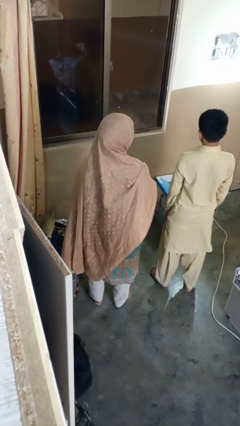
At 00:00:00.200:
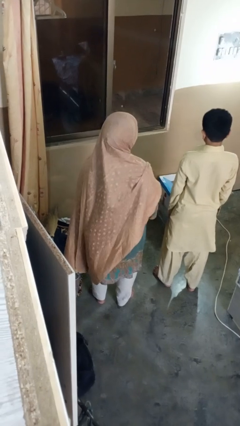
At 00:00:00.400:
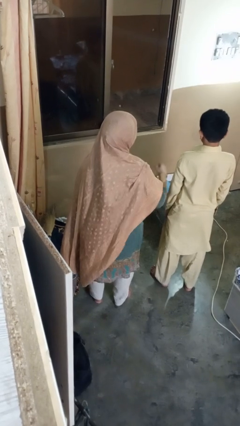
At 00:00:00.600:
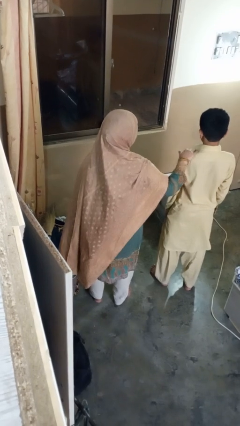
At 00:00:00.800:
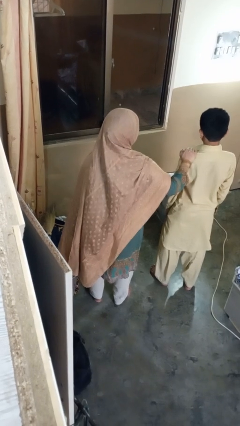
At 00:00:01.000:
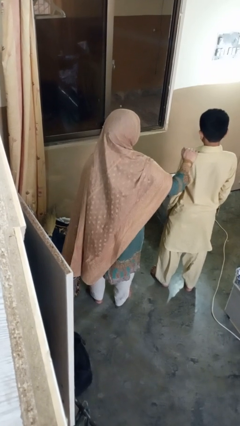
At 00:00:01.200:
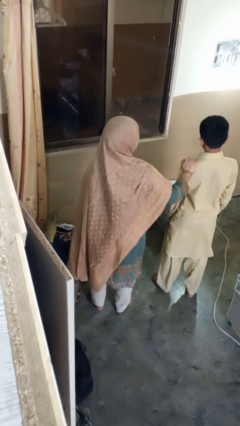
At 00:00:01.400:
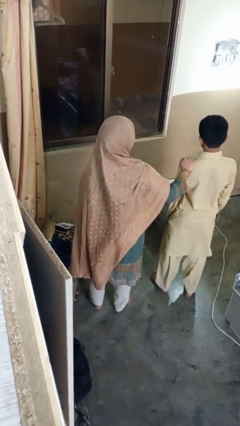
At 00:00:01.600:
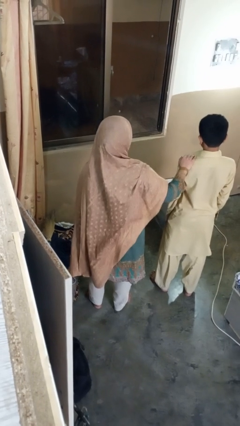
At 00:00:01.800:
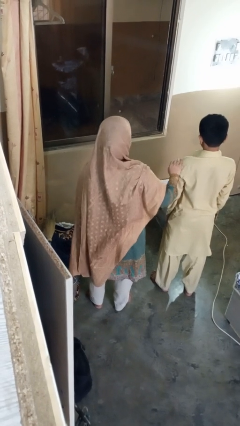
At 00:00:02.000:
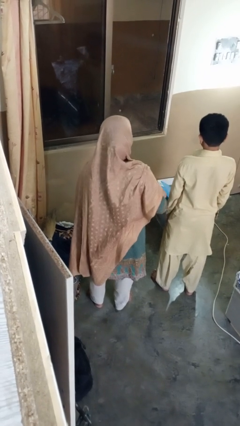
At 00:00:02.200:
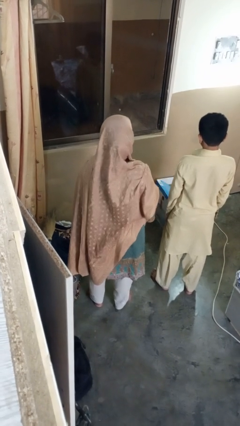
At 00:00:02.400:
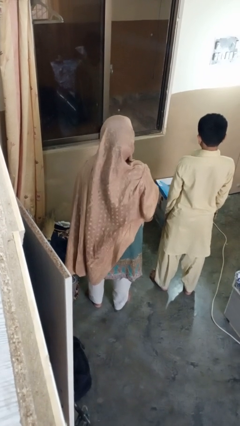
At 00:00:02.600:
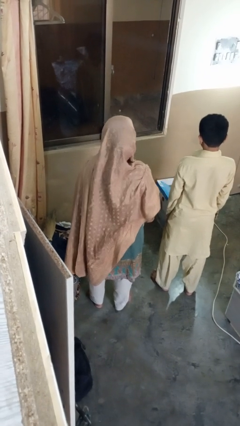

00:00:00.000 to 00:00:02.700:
person grabs person by bicep

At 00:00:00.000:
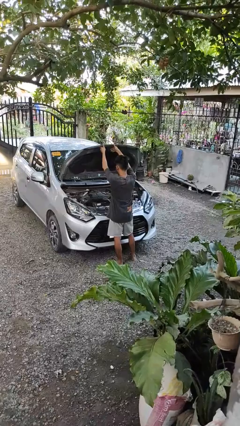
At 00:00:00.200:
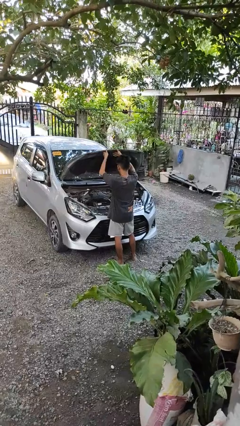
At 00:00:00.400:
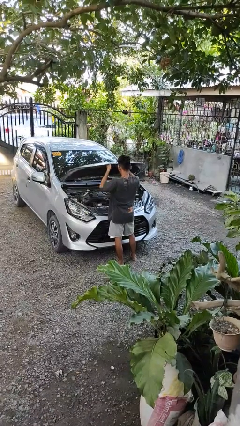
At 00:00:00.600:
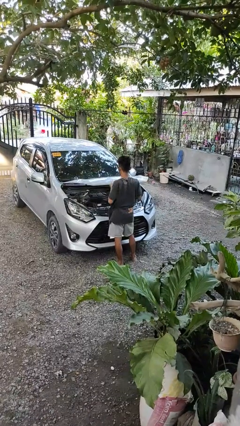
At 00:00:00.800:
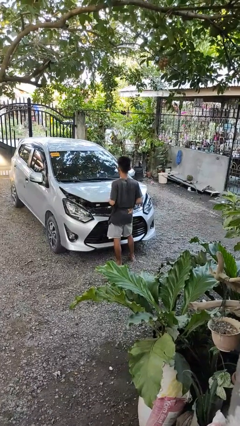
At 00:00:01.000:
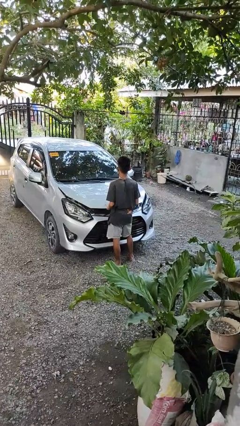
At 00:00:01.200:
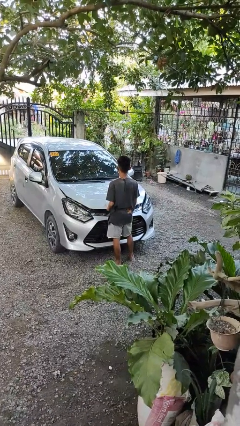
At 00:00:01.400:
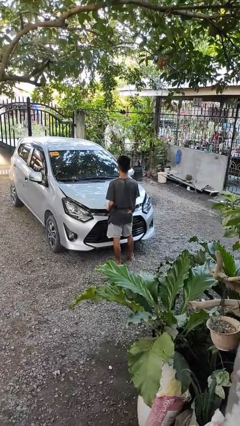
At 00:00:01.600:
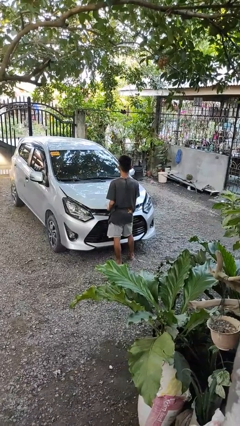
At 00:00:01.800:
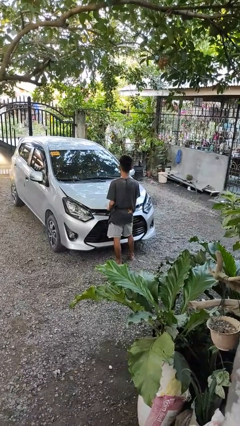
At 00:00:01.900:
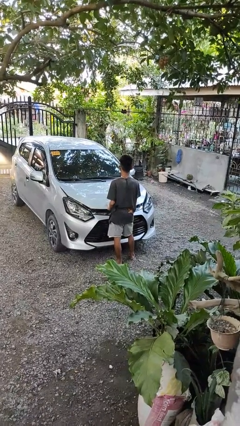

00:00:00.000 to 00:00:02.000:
person closes car hood

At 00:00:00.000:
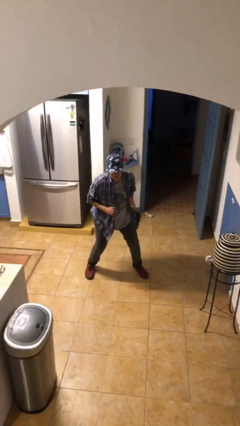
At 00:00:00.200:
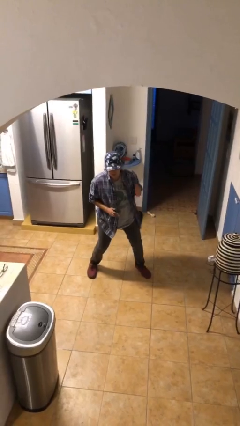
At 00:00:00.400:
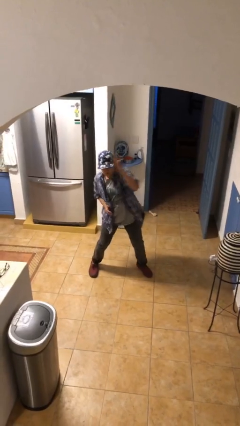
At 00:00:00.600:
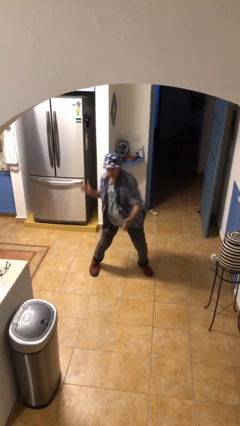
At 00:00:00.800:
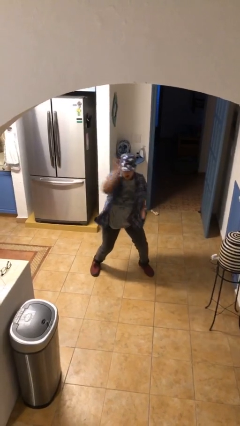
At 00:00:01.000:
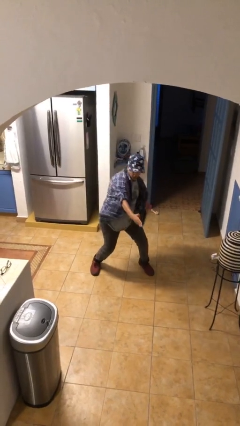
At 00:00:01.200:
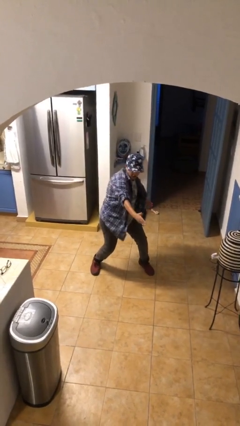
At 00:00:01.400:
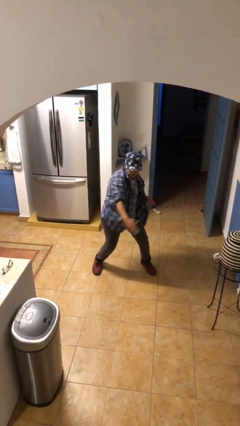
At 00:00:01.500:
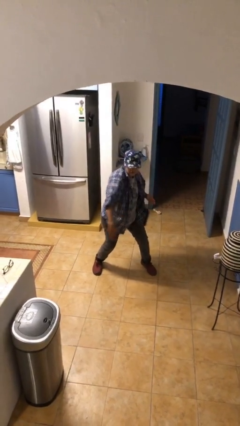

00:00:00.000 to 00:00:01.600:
person karate chop

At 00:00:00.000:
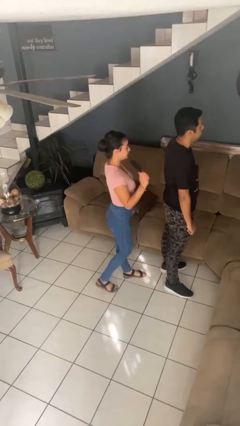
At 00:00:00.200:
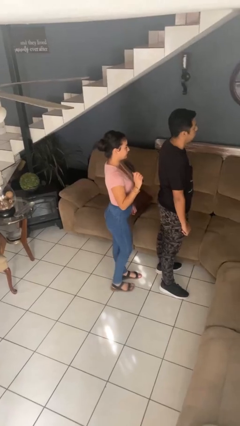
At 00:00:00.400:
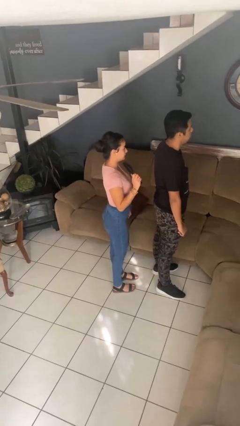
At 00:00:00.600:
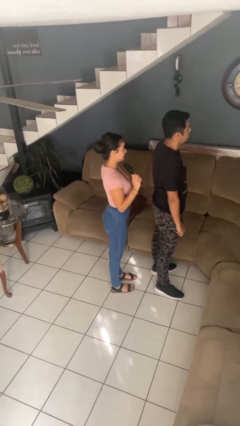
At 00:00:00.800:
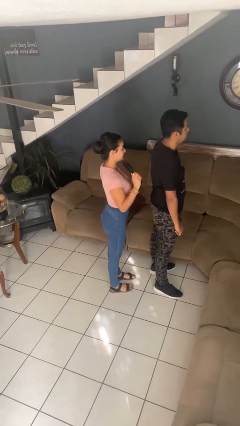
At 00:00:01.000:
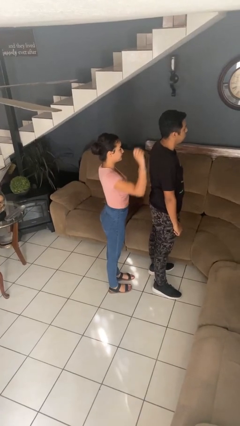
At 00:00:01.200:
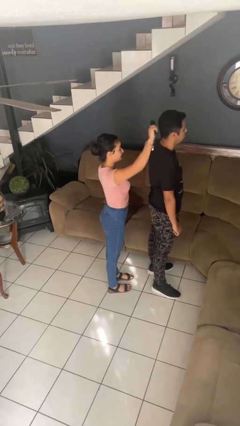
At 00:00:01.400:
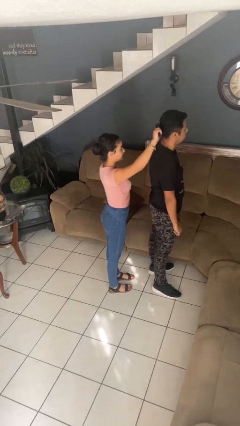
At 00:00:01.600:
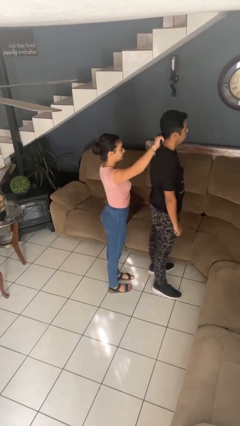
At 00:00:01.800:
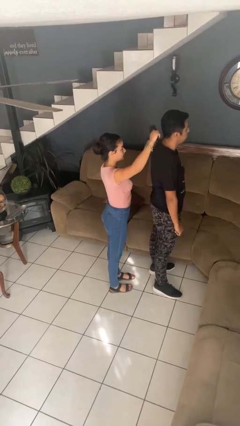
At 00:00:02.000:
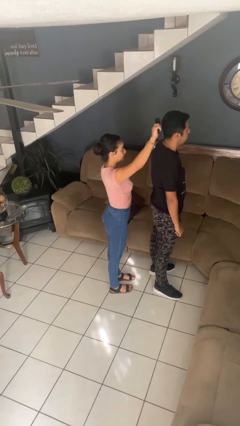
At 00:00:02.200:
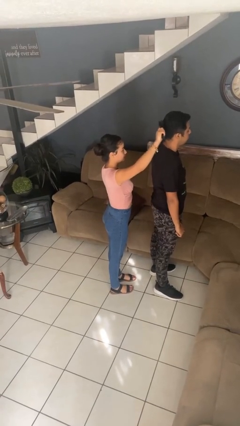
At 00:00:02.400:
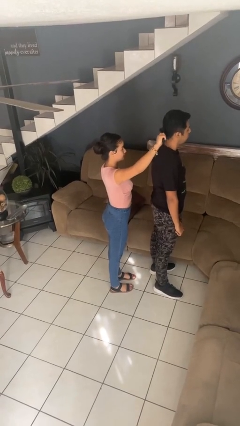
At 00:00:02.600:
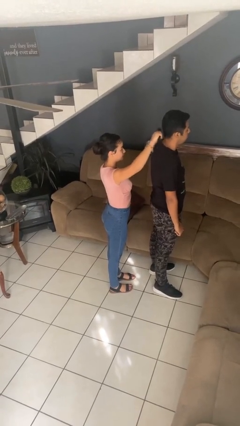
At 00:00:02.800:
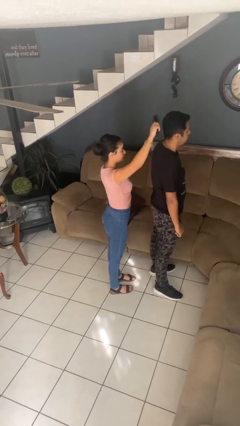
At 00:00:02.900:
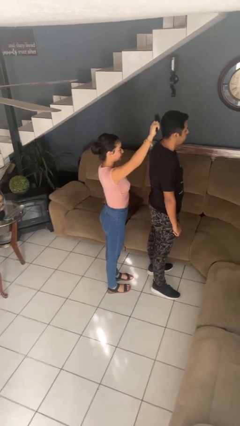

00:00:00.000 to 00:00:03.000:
person brushes hair of person

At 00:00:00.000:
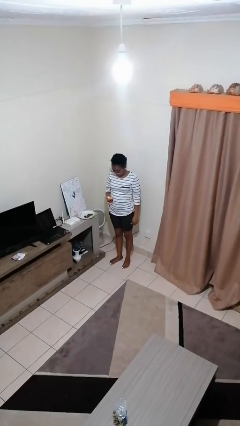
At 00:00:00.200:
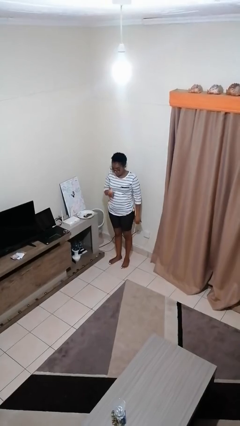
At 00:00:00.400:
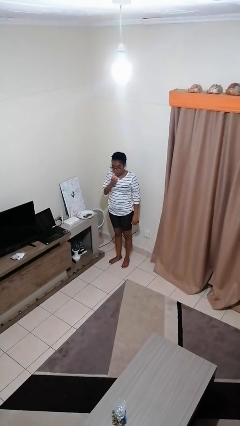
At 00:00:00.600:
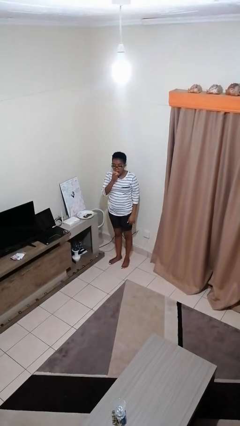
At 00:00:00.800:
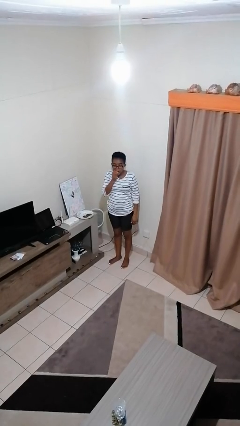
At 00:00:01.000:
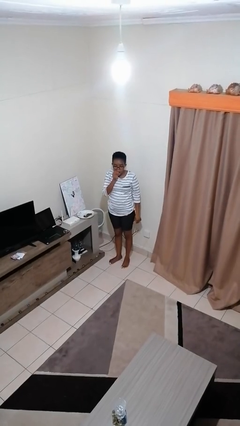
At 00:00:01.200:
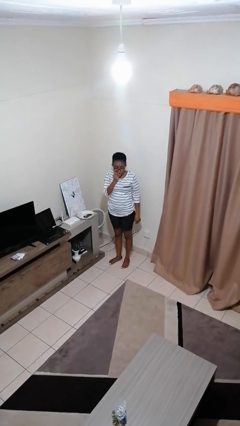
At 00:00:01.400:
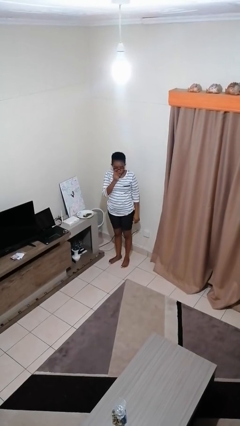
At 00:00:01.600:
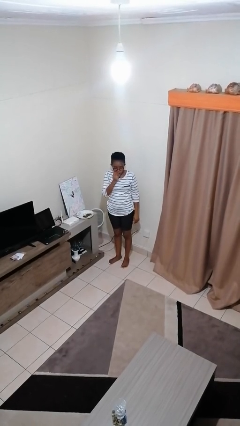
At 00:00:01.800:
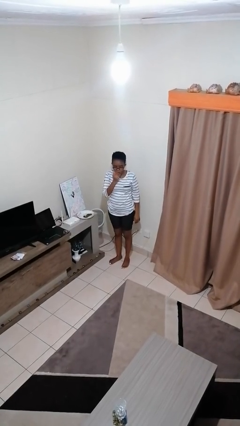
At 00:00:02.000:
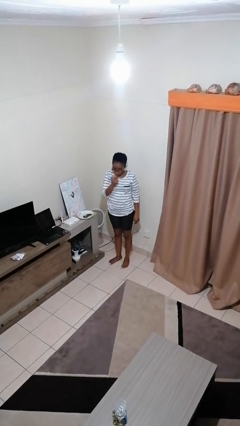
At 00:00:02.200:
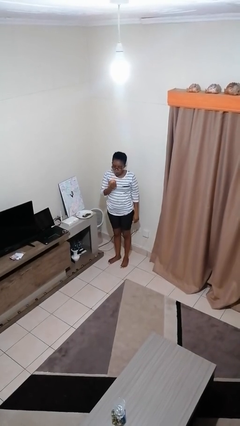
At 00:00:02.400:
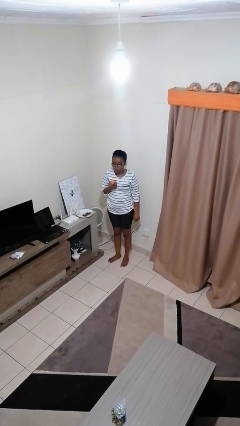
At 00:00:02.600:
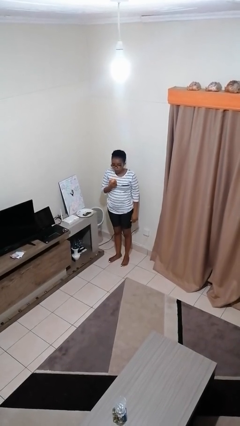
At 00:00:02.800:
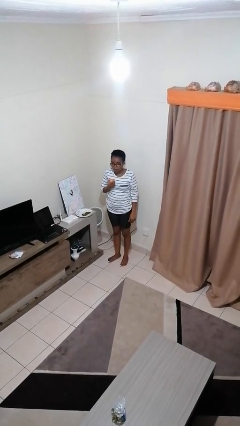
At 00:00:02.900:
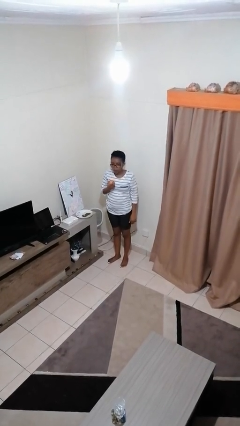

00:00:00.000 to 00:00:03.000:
person eats apple

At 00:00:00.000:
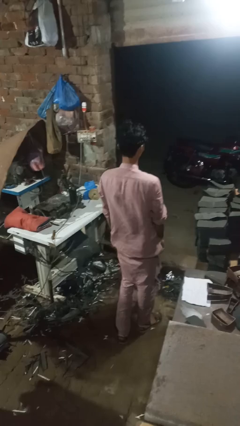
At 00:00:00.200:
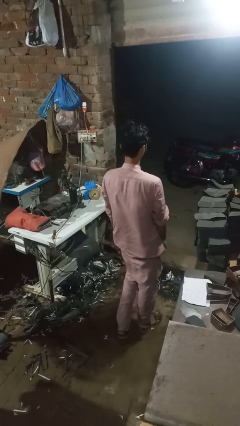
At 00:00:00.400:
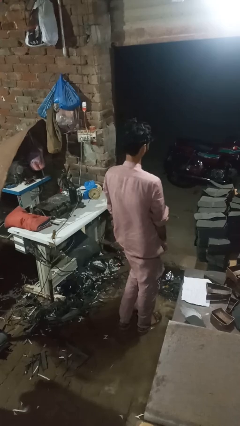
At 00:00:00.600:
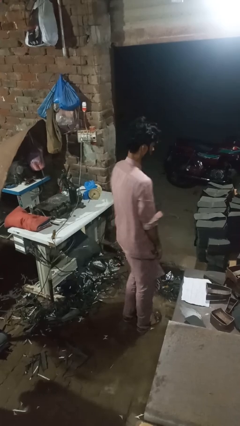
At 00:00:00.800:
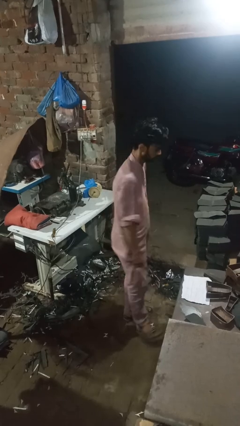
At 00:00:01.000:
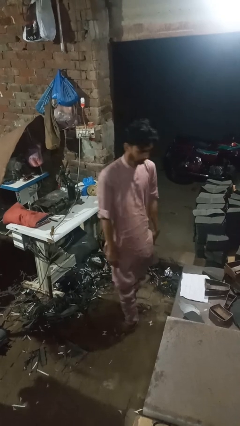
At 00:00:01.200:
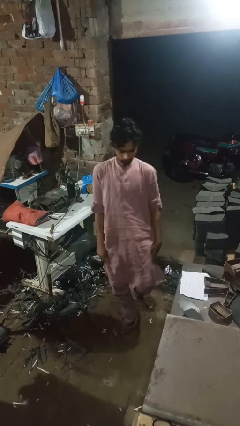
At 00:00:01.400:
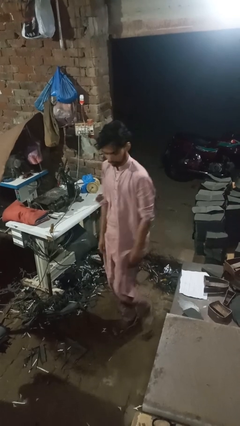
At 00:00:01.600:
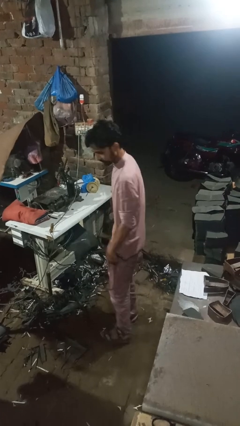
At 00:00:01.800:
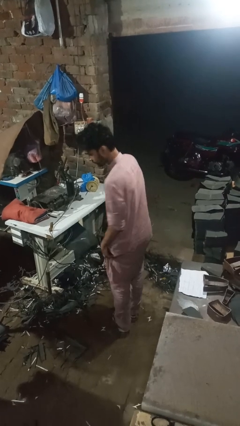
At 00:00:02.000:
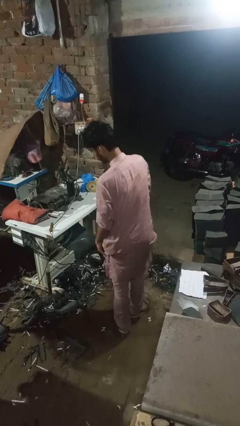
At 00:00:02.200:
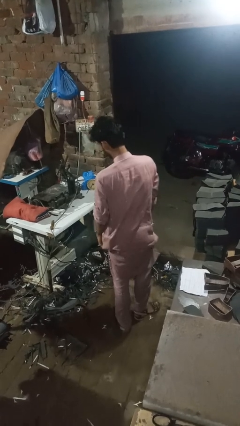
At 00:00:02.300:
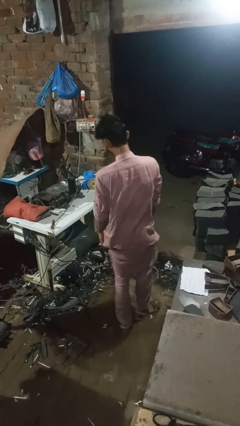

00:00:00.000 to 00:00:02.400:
person twirls

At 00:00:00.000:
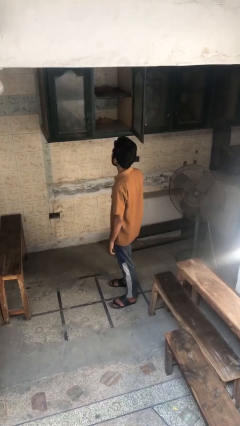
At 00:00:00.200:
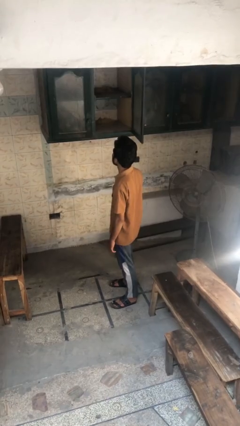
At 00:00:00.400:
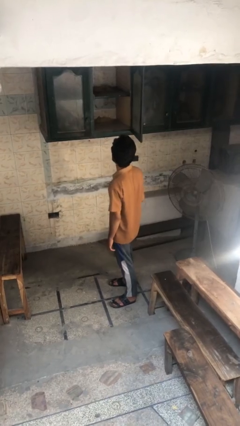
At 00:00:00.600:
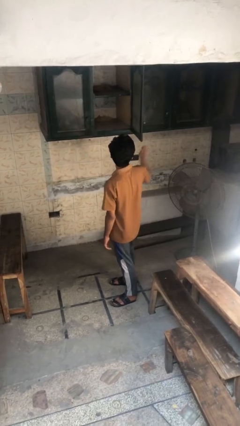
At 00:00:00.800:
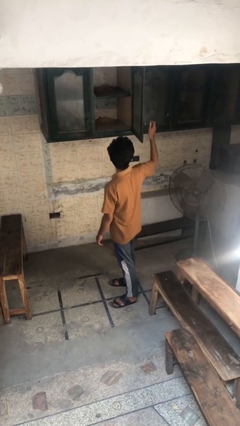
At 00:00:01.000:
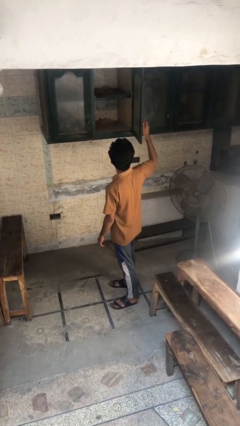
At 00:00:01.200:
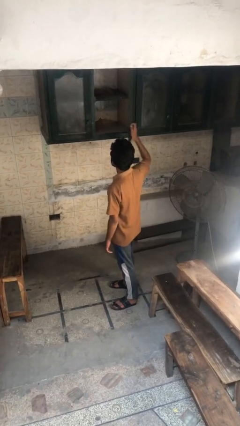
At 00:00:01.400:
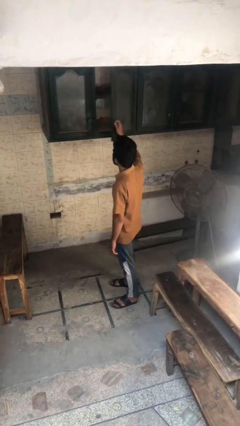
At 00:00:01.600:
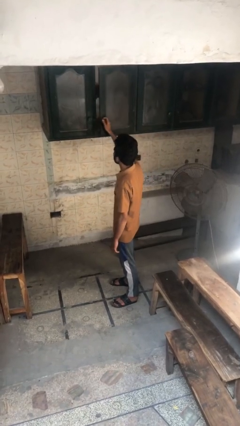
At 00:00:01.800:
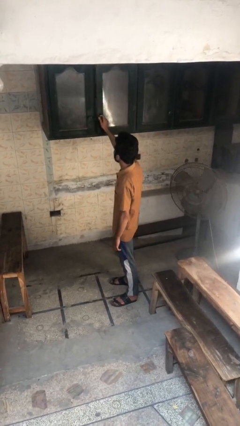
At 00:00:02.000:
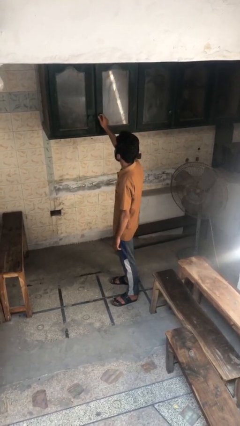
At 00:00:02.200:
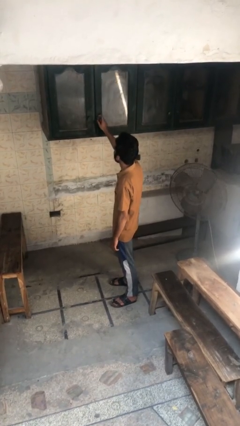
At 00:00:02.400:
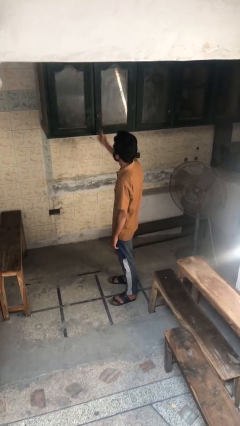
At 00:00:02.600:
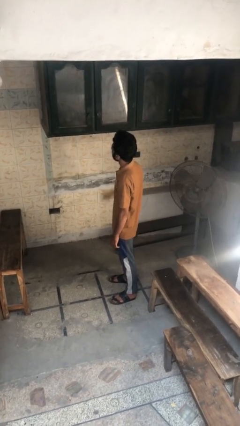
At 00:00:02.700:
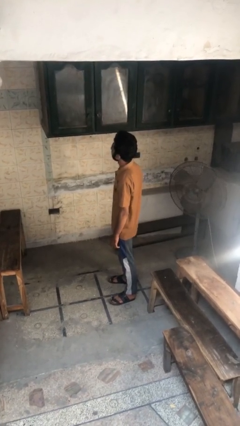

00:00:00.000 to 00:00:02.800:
person closes cabinet
